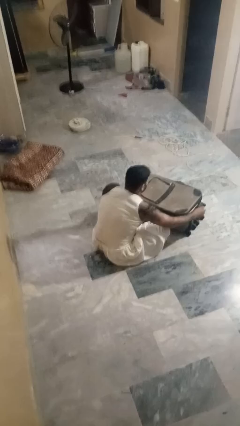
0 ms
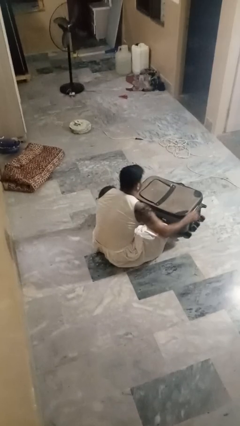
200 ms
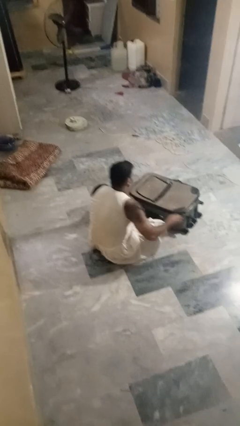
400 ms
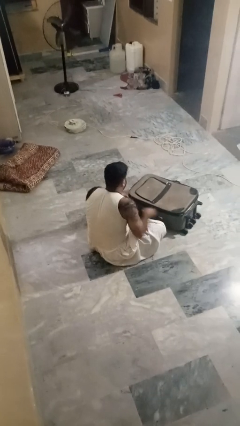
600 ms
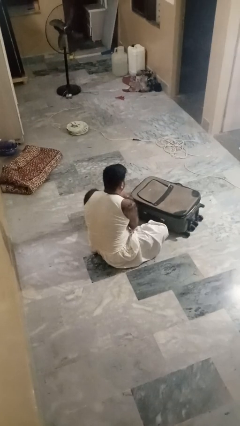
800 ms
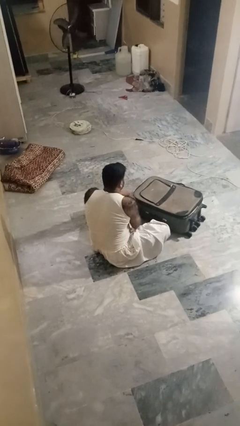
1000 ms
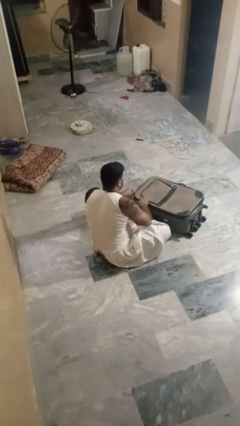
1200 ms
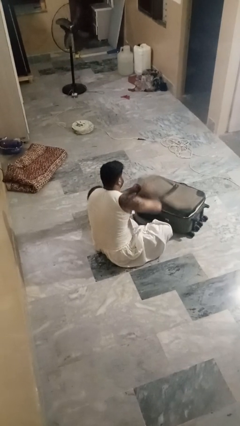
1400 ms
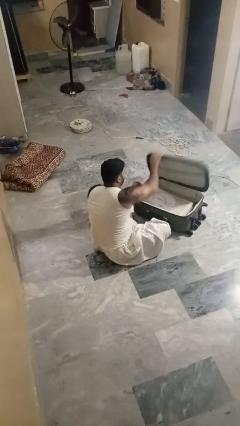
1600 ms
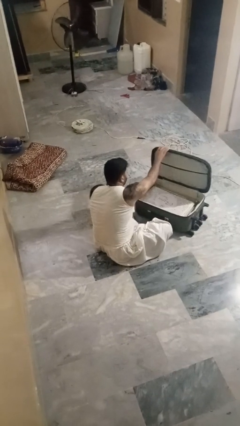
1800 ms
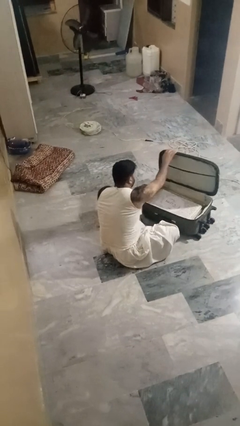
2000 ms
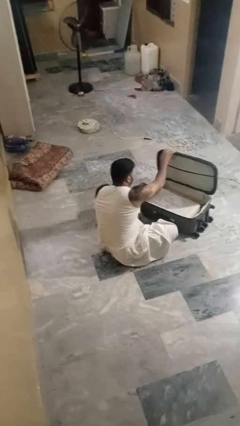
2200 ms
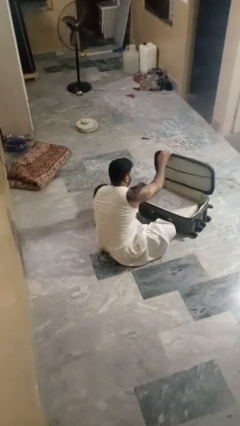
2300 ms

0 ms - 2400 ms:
person opens suitcase

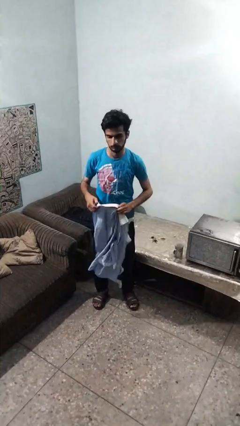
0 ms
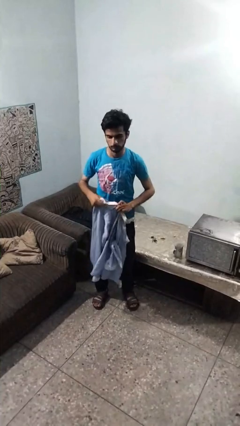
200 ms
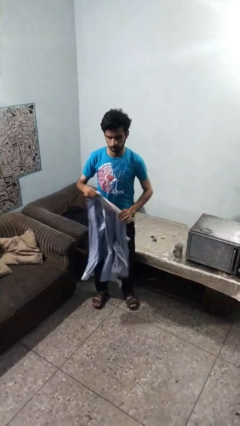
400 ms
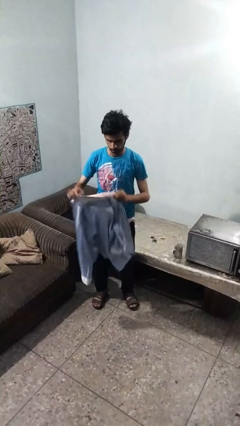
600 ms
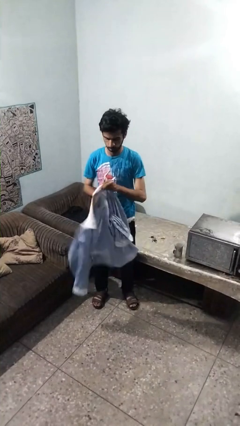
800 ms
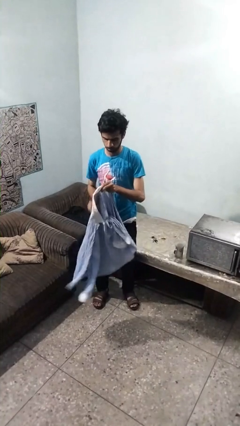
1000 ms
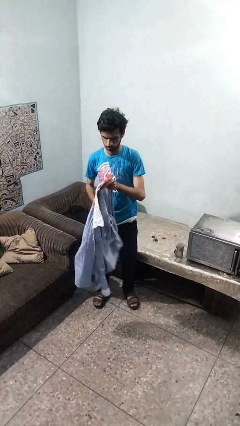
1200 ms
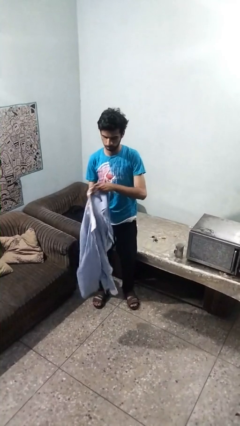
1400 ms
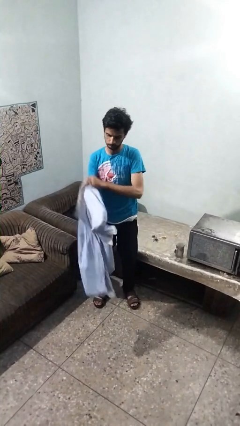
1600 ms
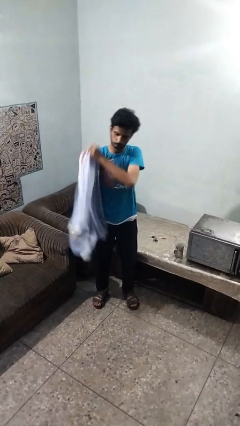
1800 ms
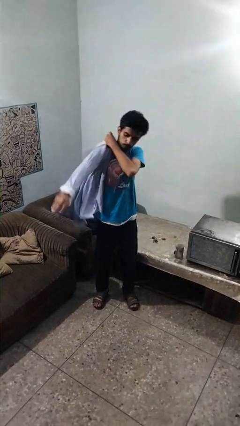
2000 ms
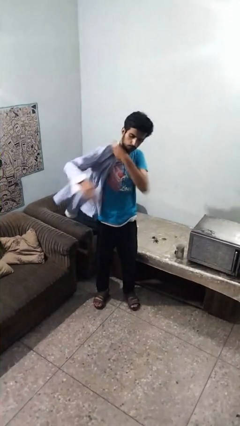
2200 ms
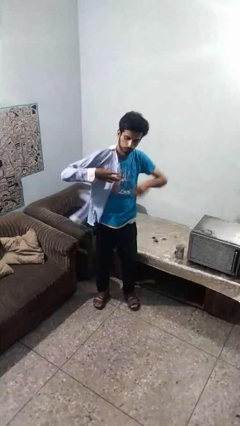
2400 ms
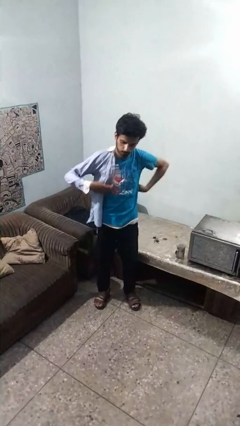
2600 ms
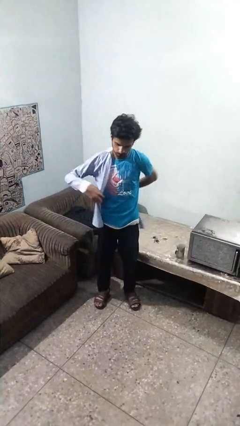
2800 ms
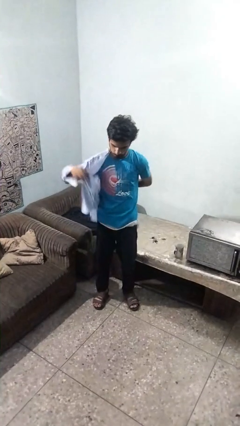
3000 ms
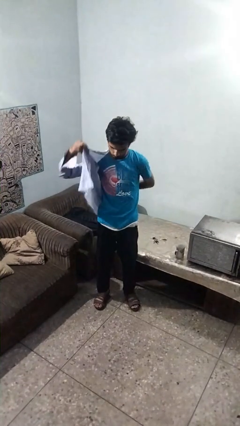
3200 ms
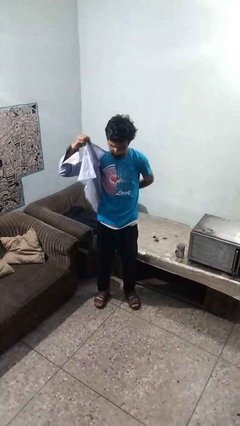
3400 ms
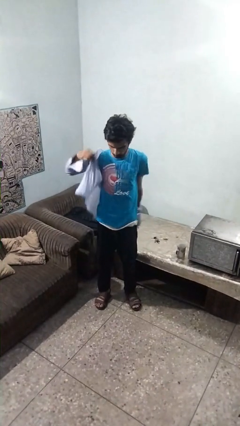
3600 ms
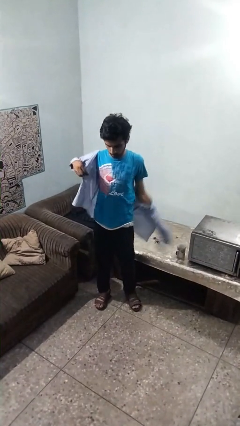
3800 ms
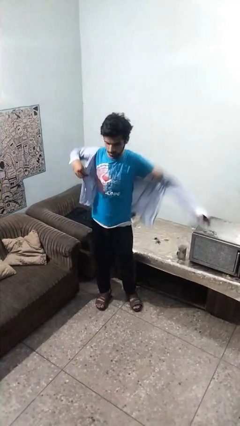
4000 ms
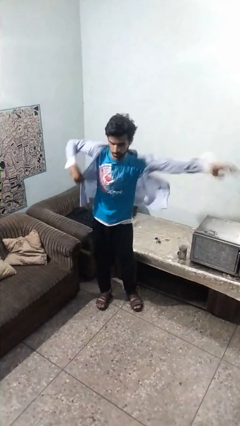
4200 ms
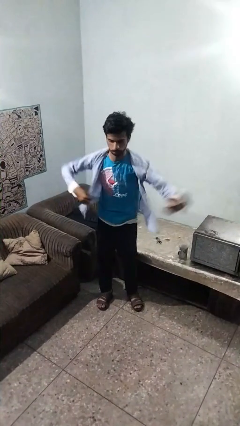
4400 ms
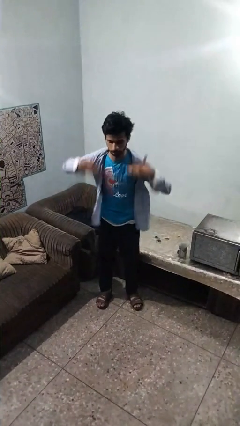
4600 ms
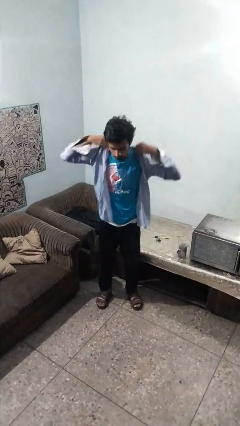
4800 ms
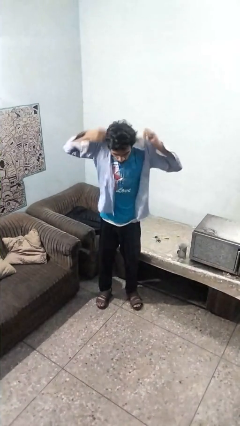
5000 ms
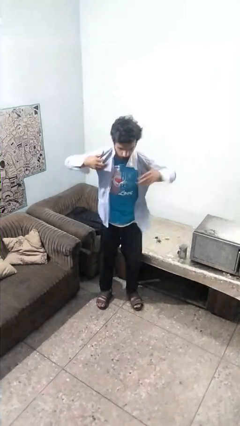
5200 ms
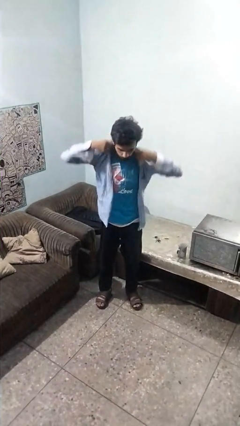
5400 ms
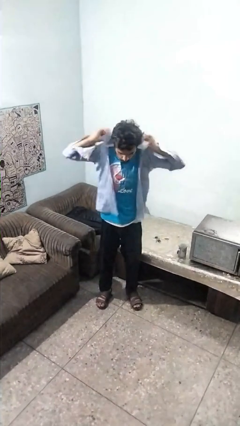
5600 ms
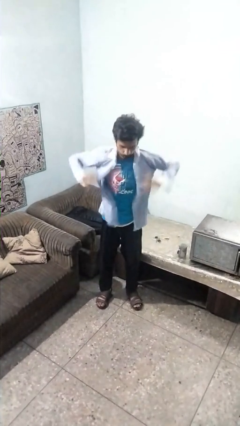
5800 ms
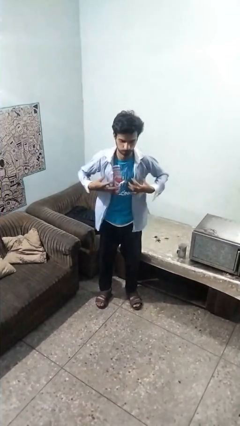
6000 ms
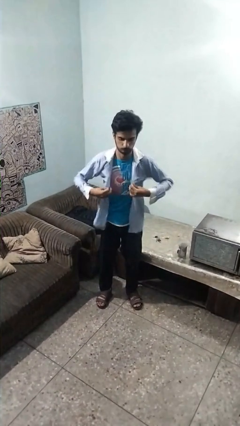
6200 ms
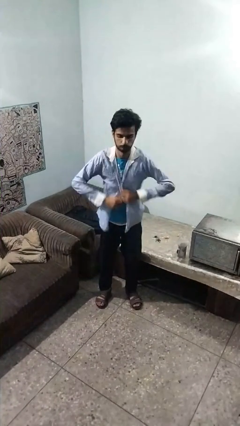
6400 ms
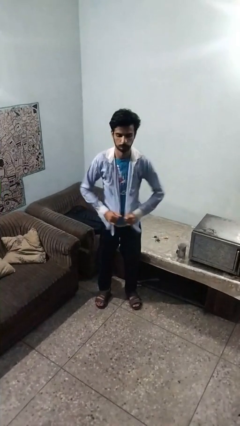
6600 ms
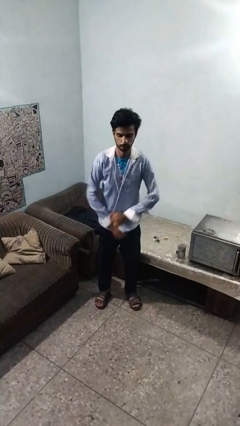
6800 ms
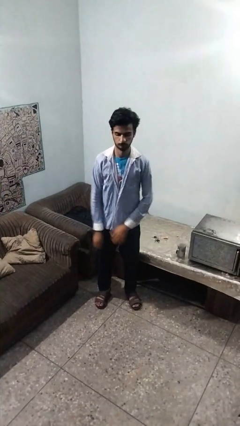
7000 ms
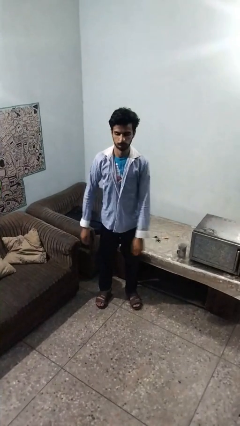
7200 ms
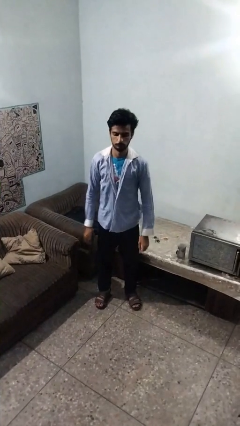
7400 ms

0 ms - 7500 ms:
person puts on shirt

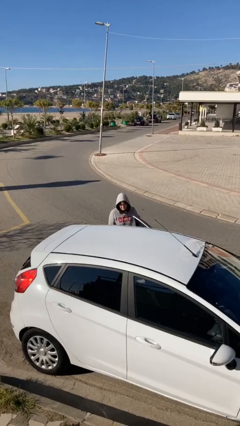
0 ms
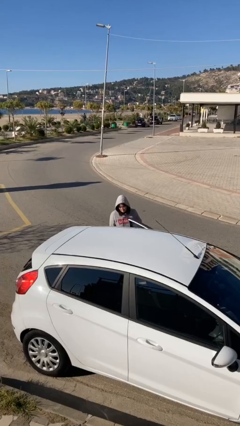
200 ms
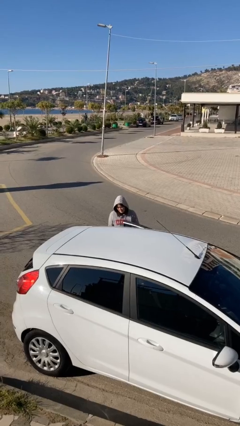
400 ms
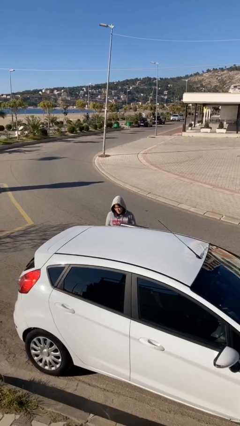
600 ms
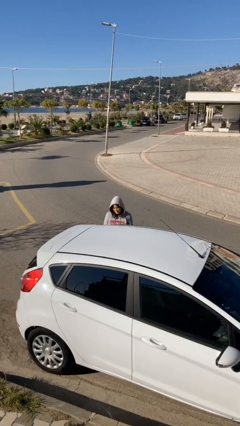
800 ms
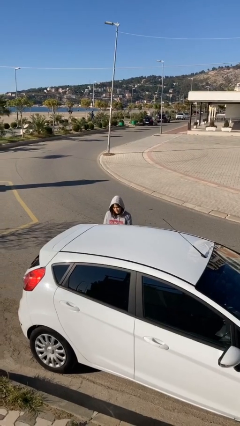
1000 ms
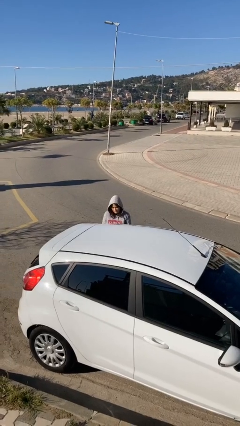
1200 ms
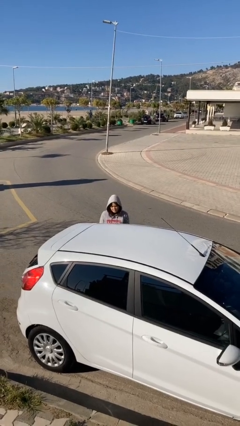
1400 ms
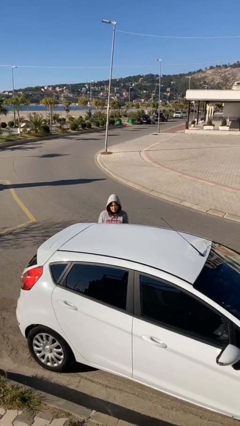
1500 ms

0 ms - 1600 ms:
person closes car door

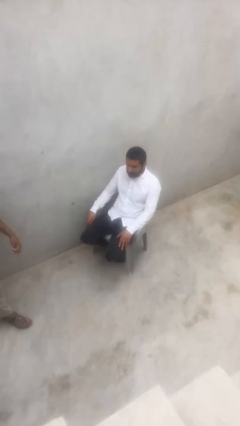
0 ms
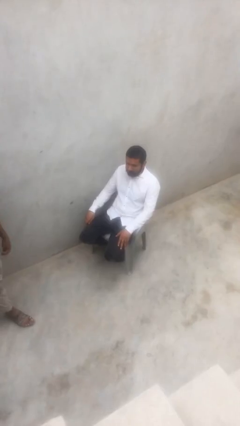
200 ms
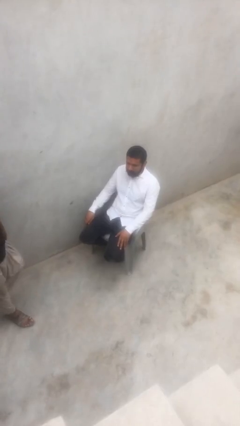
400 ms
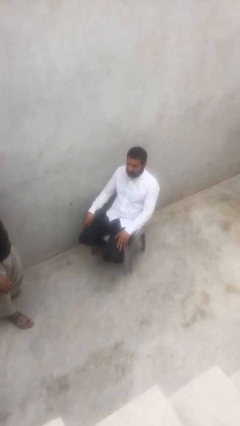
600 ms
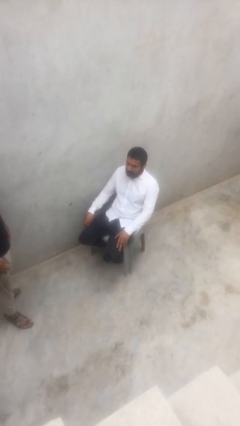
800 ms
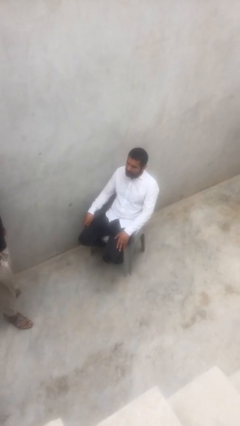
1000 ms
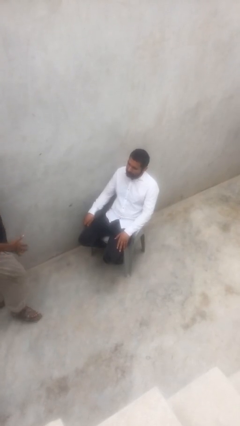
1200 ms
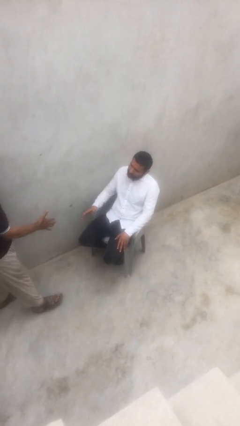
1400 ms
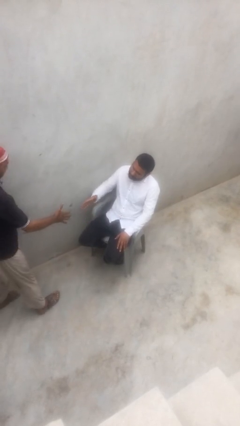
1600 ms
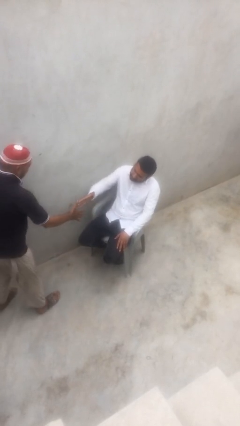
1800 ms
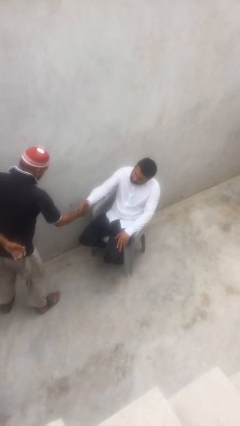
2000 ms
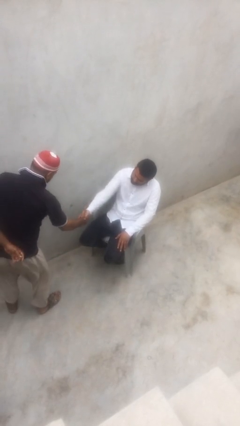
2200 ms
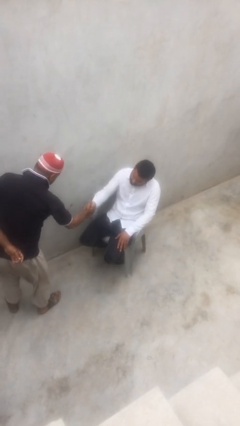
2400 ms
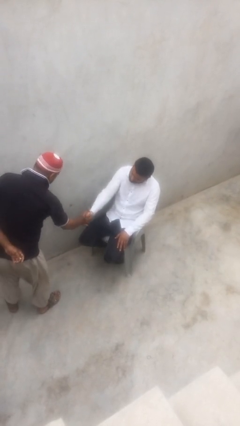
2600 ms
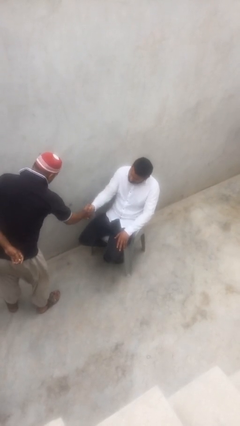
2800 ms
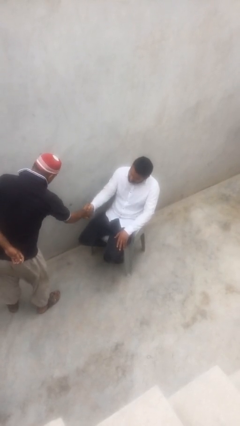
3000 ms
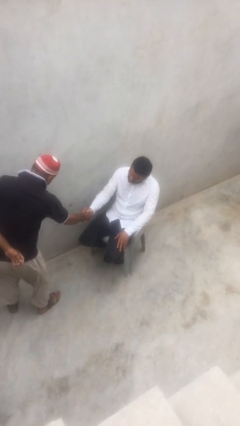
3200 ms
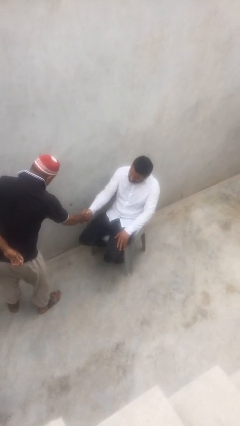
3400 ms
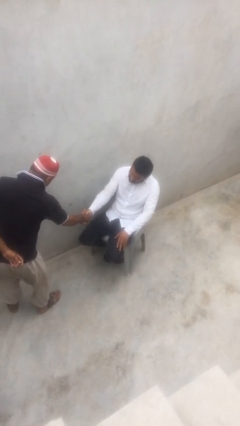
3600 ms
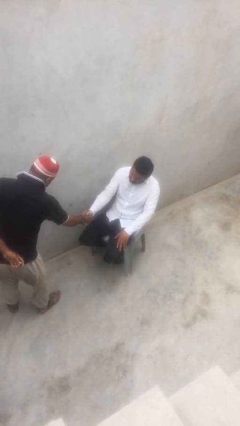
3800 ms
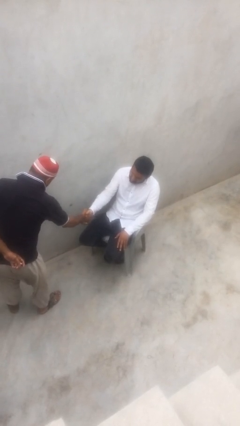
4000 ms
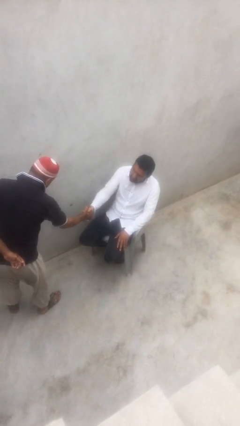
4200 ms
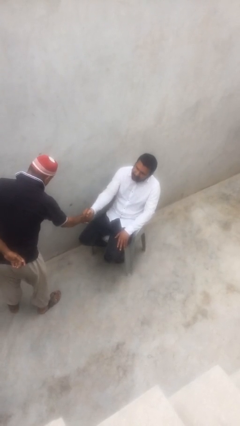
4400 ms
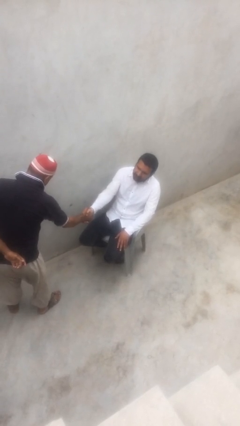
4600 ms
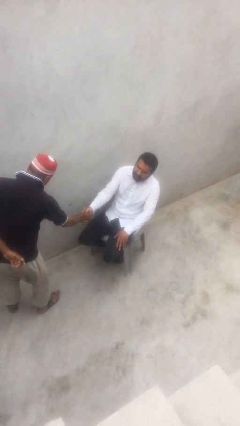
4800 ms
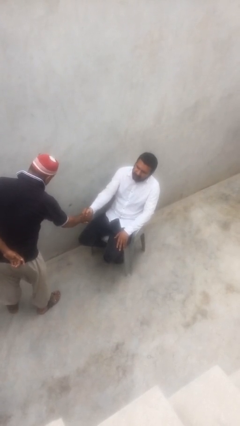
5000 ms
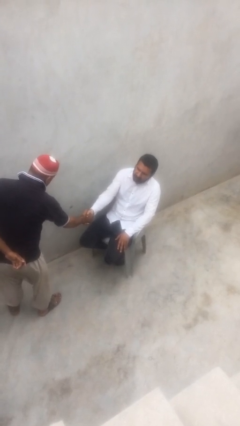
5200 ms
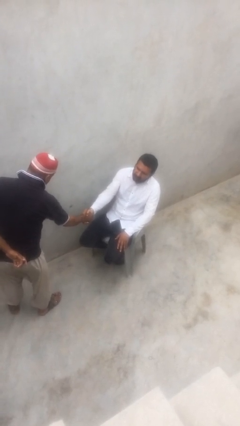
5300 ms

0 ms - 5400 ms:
person shakes hand

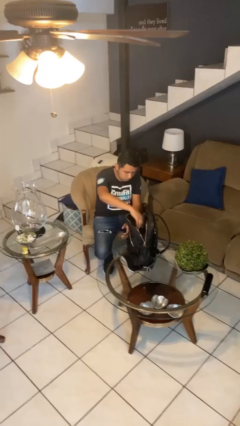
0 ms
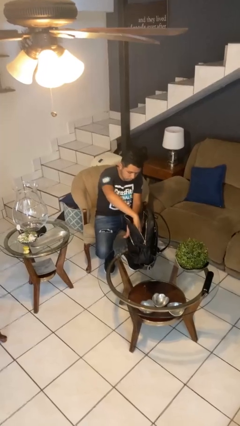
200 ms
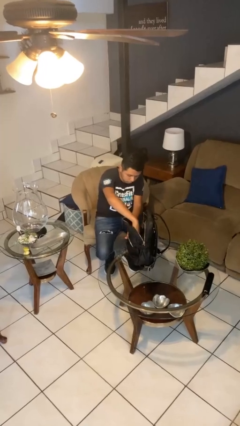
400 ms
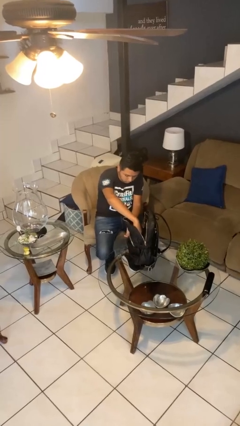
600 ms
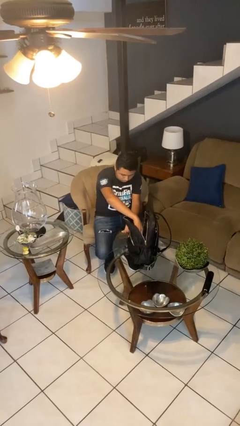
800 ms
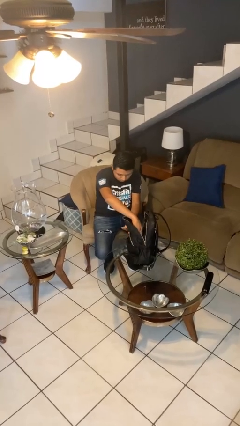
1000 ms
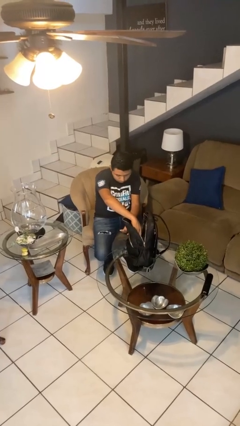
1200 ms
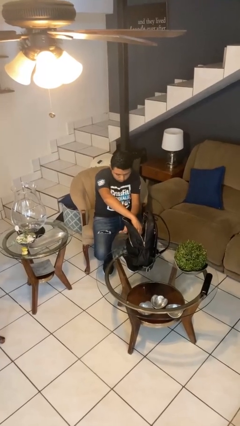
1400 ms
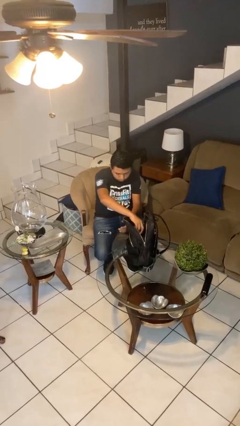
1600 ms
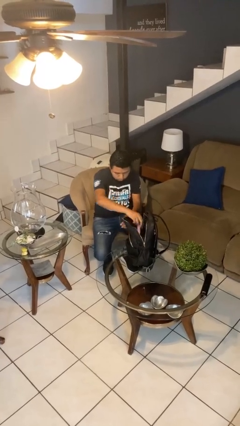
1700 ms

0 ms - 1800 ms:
person searches in backpack
